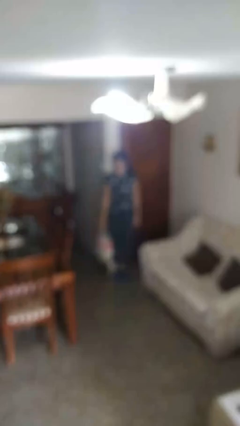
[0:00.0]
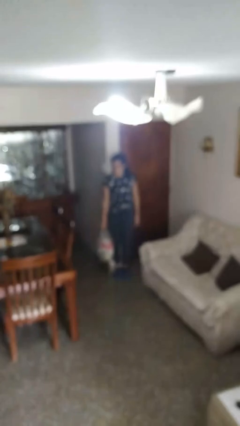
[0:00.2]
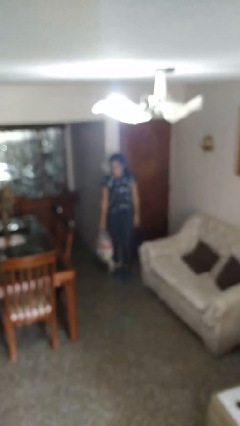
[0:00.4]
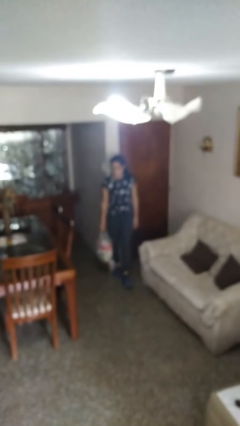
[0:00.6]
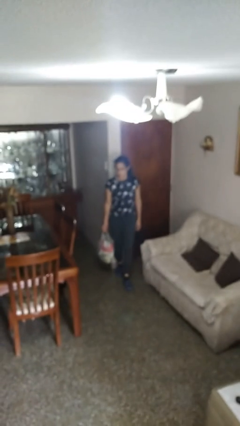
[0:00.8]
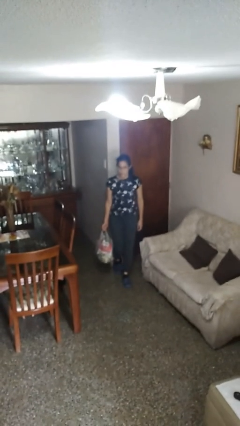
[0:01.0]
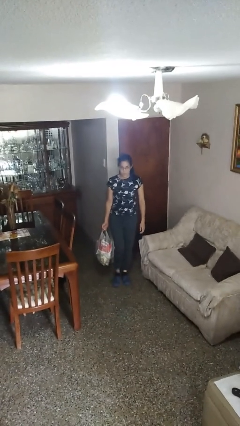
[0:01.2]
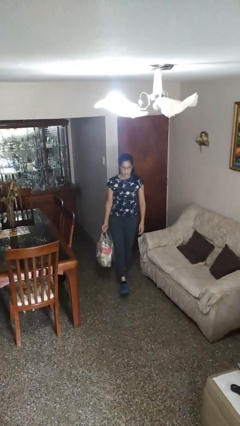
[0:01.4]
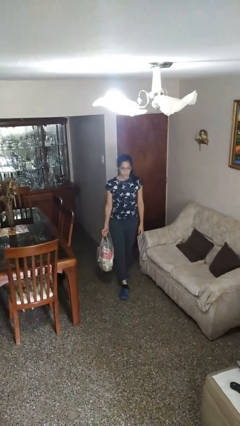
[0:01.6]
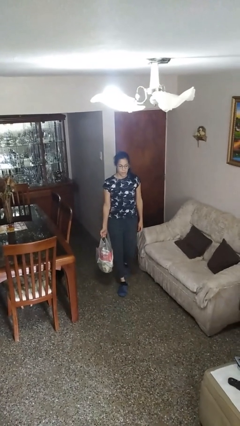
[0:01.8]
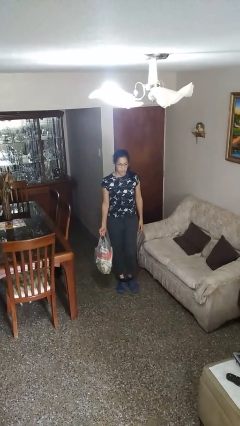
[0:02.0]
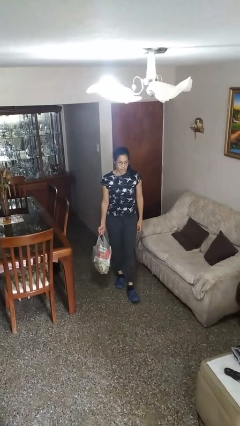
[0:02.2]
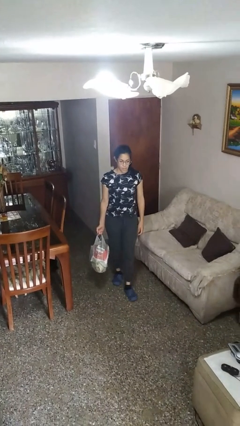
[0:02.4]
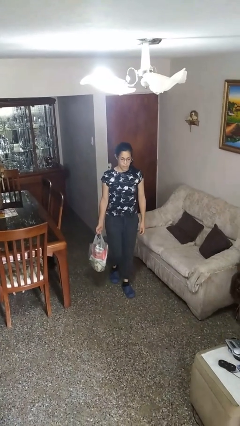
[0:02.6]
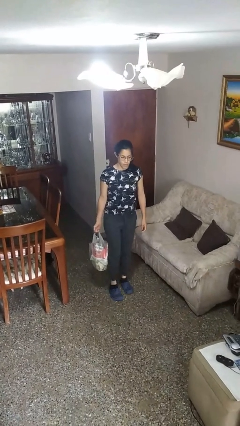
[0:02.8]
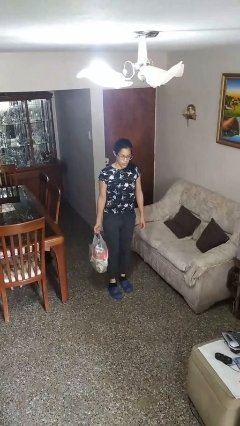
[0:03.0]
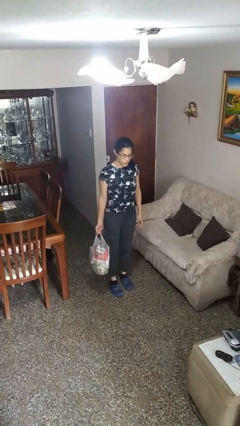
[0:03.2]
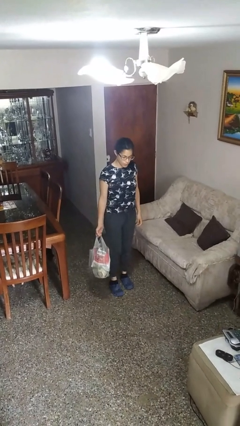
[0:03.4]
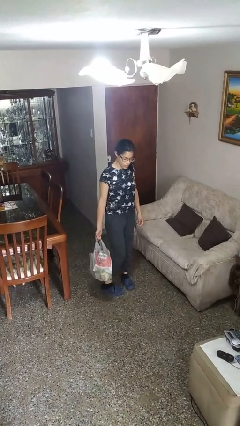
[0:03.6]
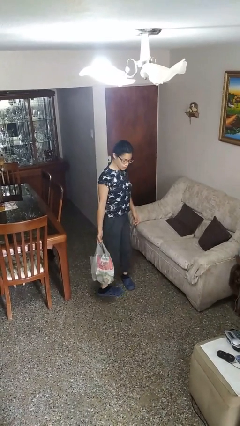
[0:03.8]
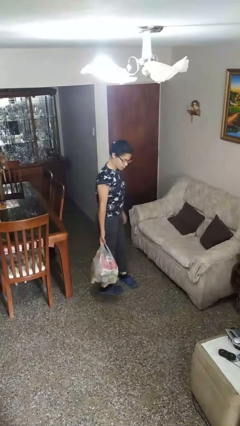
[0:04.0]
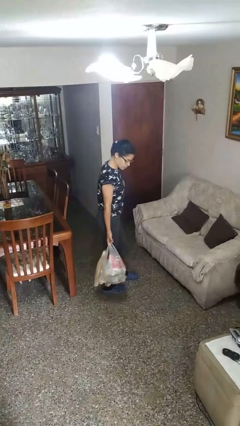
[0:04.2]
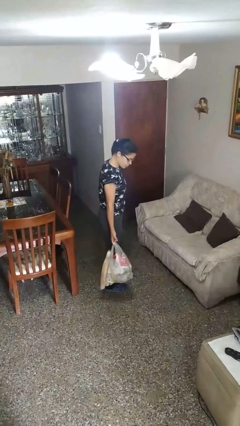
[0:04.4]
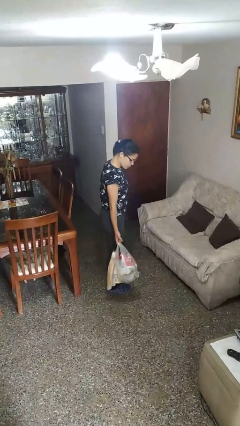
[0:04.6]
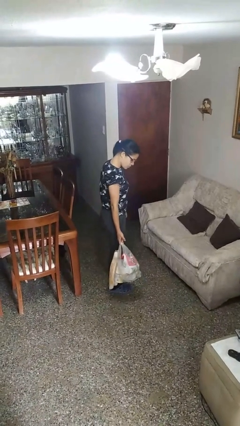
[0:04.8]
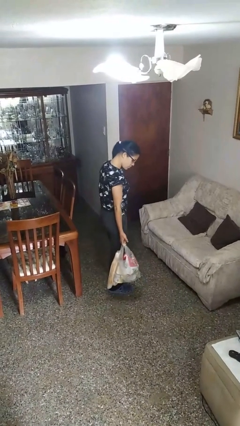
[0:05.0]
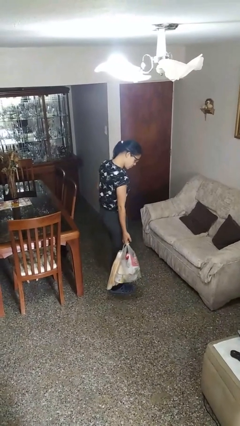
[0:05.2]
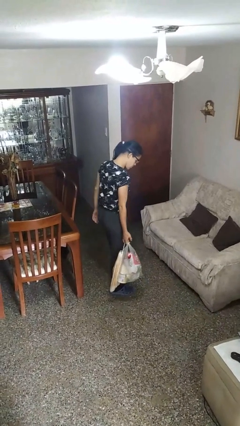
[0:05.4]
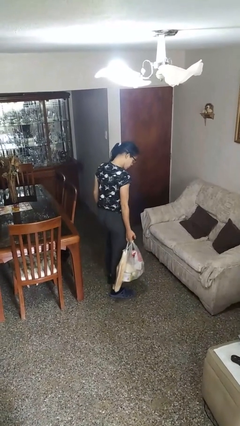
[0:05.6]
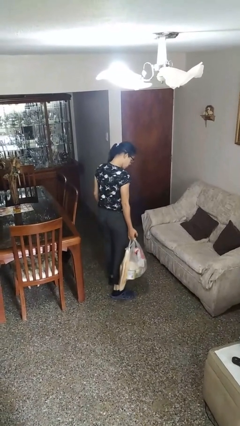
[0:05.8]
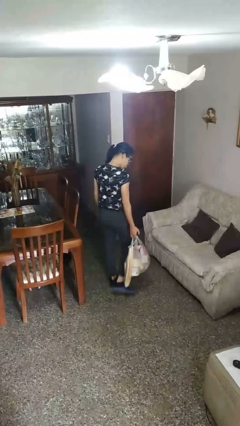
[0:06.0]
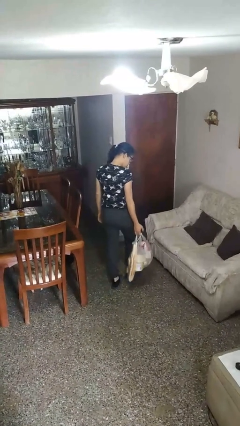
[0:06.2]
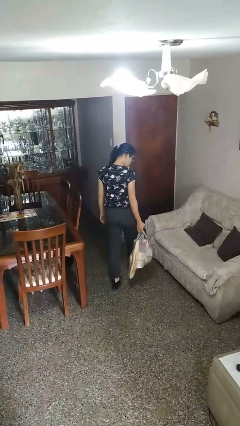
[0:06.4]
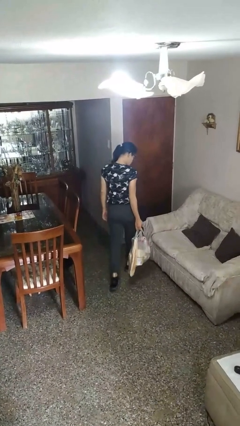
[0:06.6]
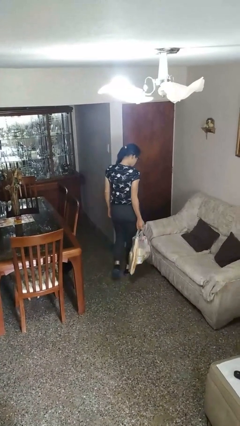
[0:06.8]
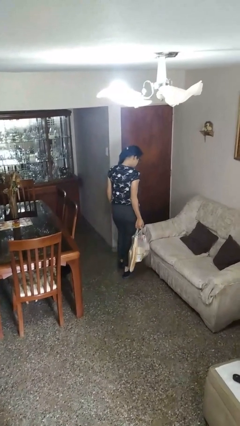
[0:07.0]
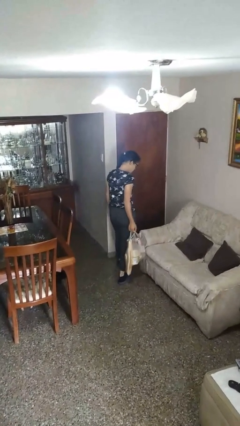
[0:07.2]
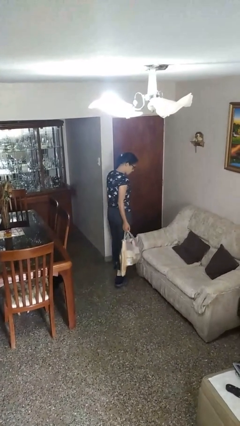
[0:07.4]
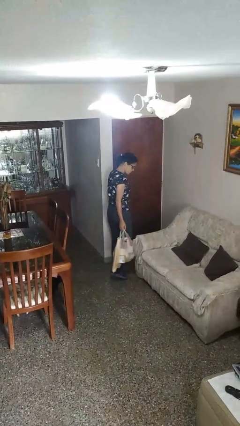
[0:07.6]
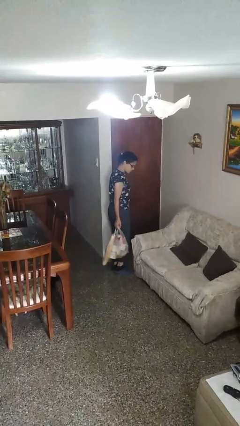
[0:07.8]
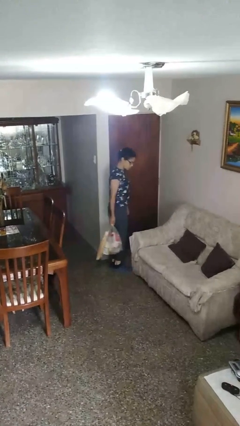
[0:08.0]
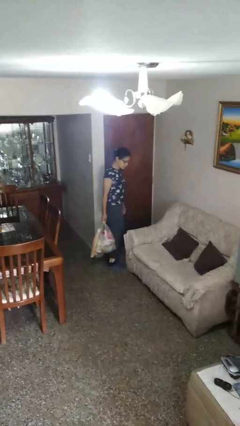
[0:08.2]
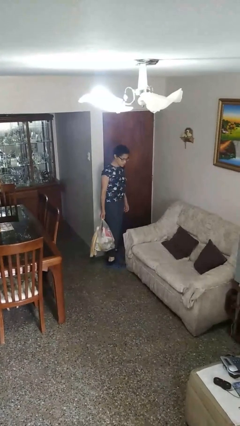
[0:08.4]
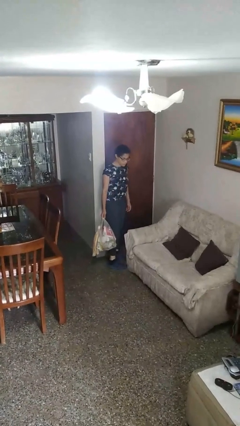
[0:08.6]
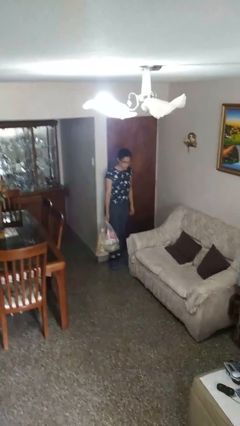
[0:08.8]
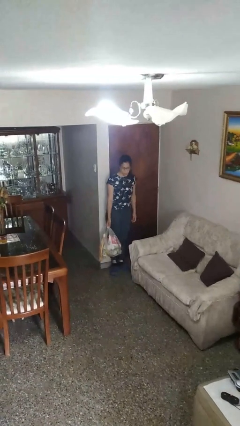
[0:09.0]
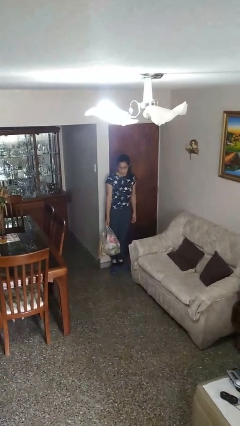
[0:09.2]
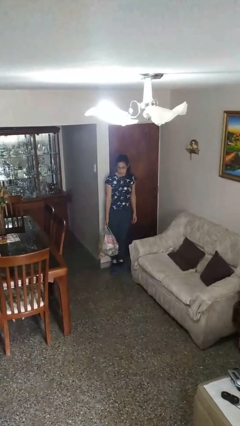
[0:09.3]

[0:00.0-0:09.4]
person carries groceries

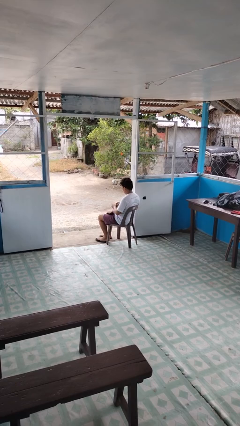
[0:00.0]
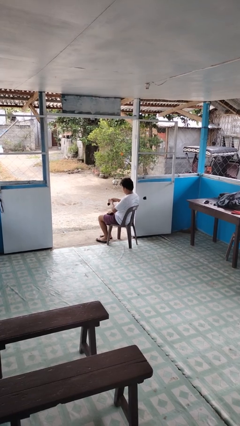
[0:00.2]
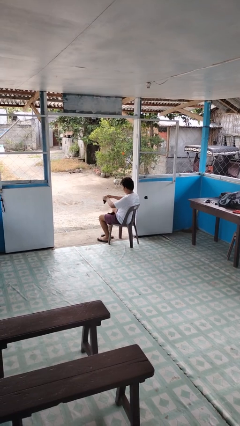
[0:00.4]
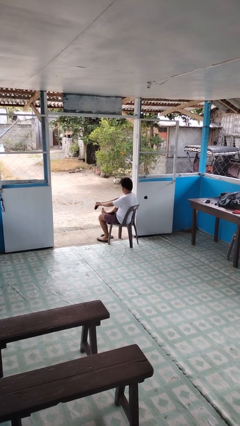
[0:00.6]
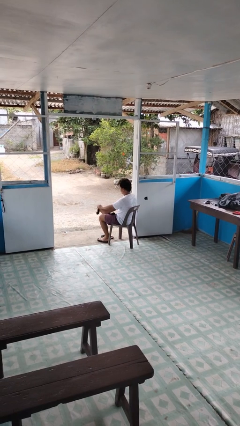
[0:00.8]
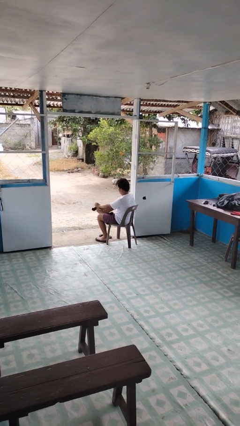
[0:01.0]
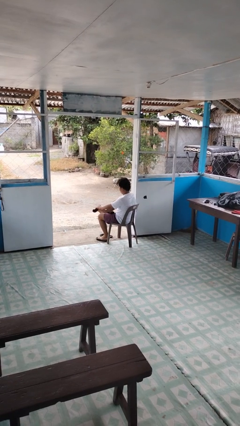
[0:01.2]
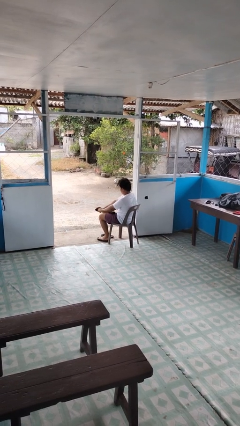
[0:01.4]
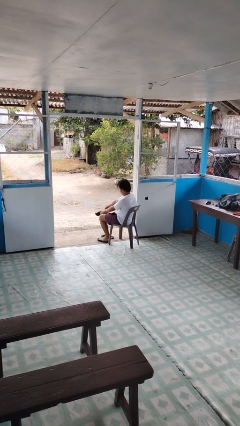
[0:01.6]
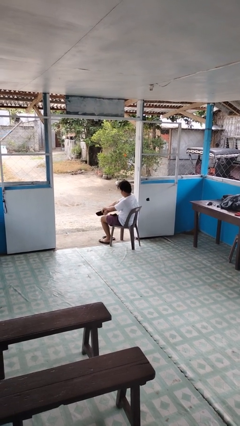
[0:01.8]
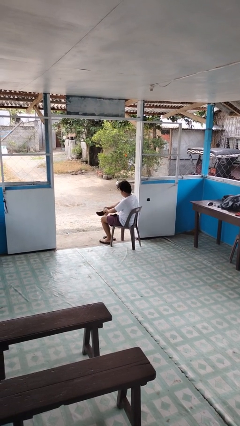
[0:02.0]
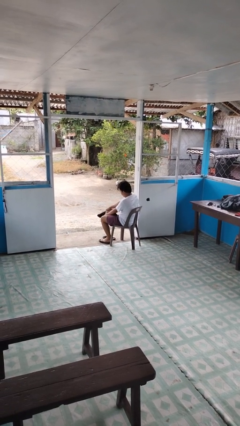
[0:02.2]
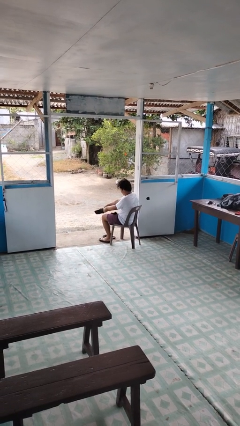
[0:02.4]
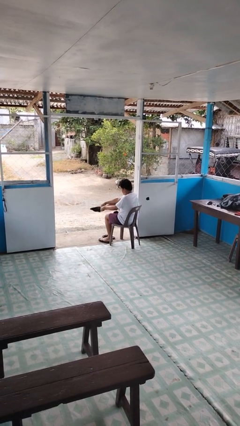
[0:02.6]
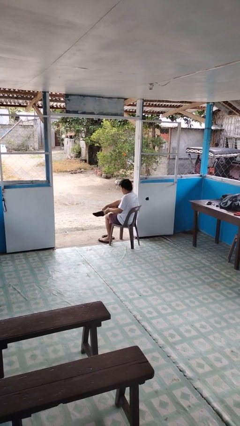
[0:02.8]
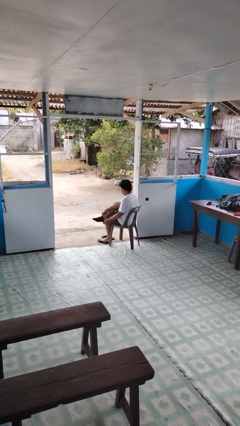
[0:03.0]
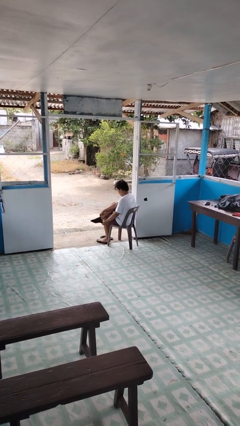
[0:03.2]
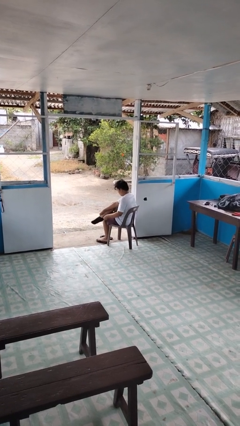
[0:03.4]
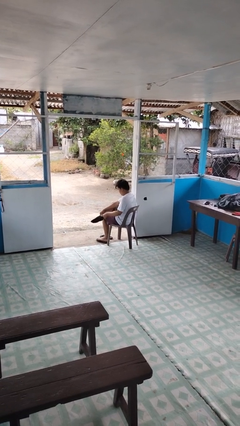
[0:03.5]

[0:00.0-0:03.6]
person puts on socks

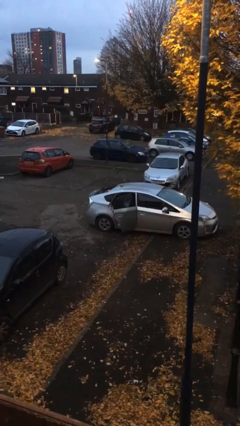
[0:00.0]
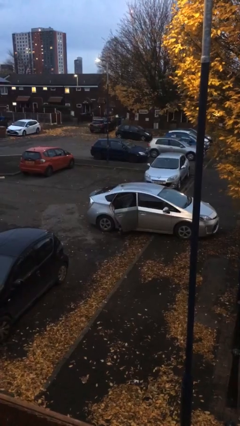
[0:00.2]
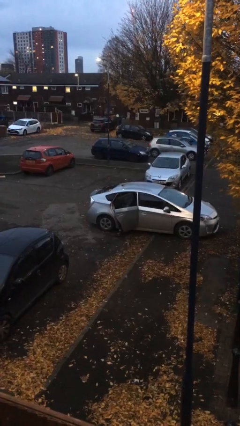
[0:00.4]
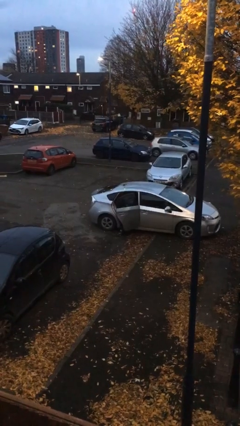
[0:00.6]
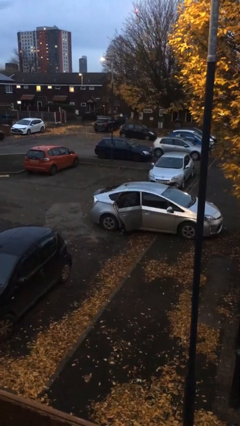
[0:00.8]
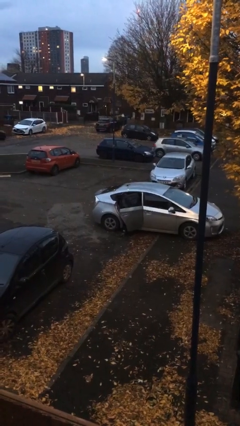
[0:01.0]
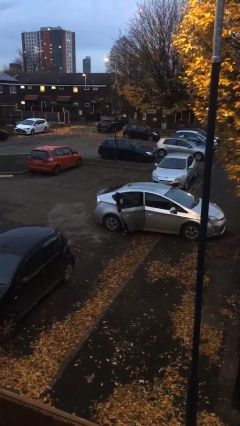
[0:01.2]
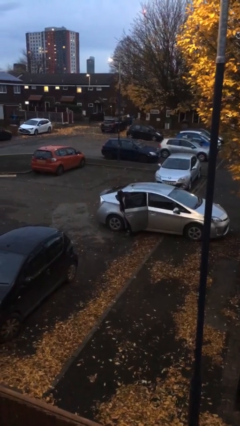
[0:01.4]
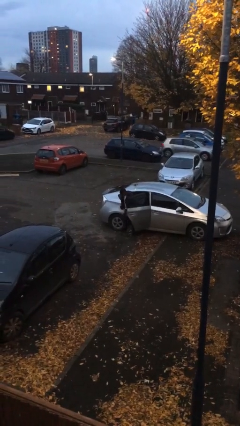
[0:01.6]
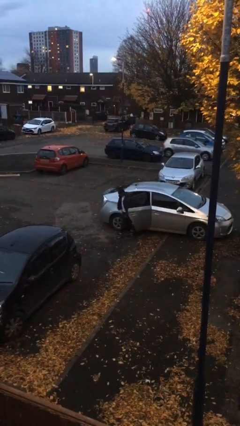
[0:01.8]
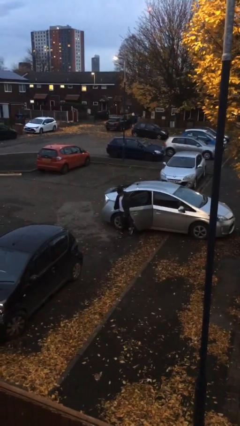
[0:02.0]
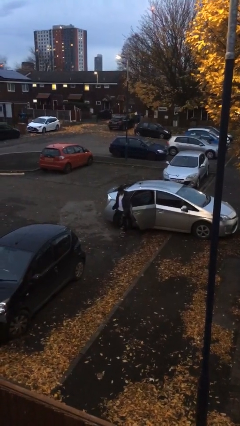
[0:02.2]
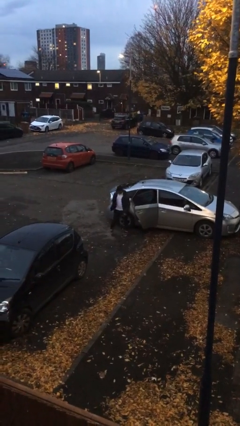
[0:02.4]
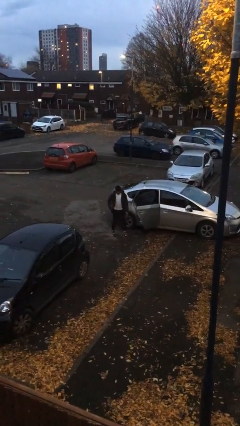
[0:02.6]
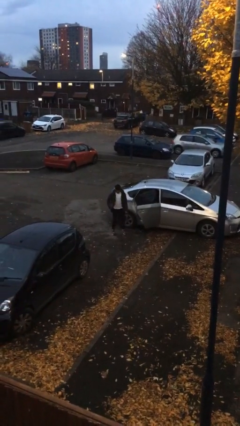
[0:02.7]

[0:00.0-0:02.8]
person exits car

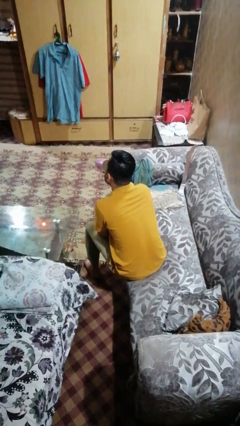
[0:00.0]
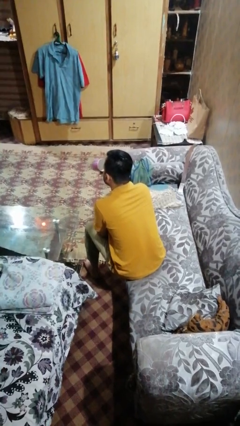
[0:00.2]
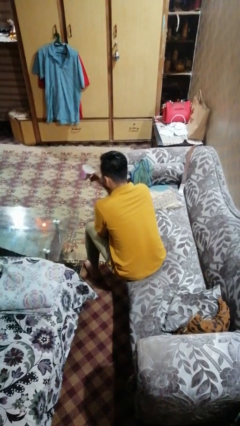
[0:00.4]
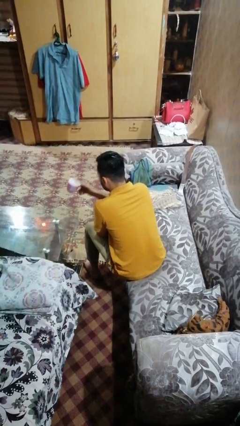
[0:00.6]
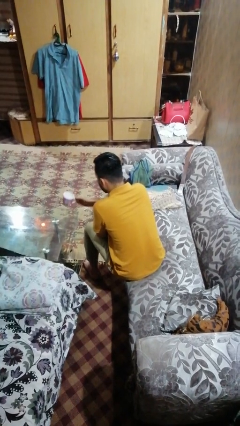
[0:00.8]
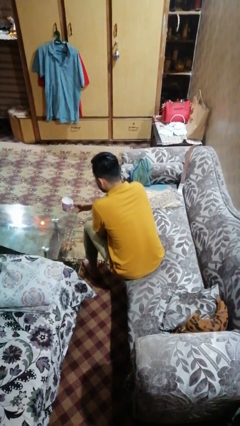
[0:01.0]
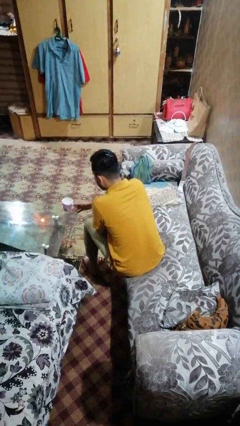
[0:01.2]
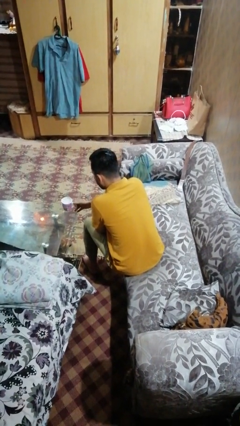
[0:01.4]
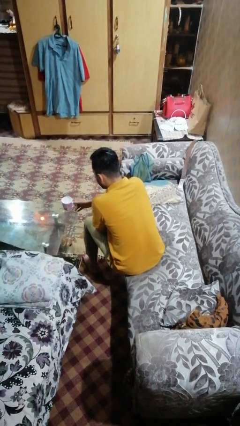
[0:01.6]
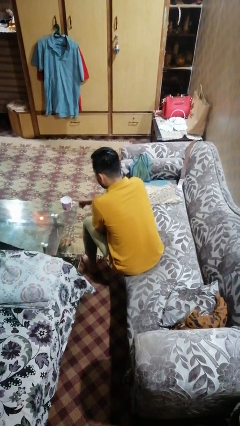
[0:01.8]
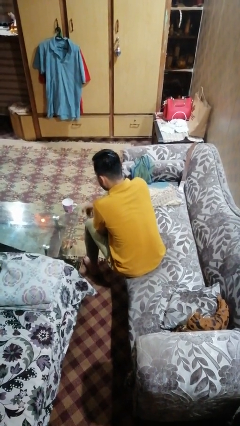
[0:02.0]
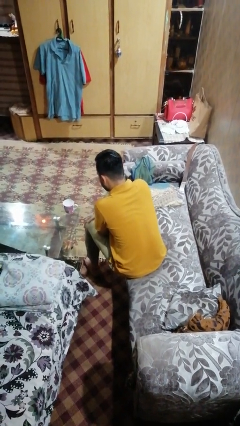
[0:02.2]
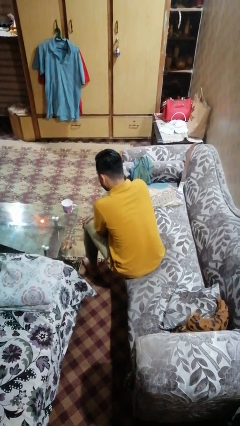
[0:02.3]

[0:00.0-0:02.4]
person puts down object on table
